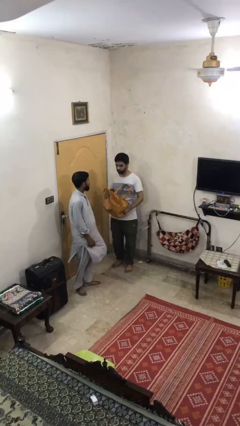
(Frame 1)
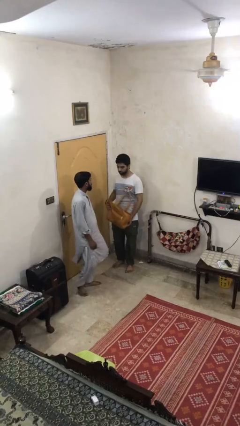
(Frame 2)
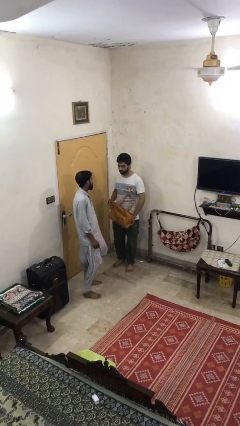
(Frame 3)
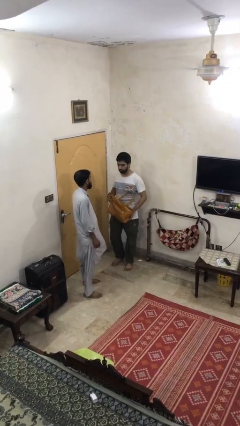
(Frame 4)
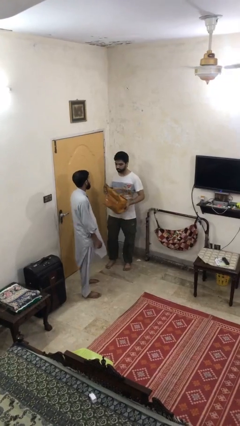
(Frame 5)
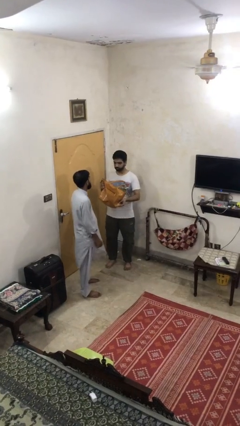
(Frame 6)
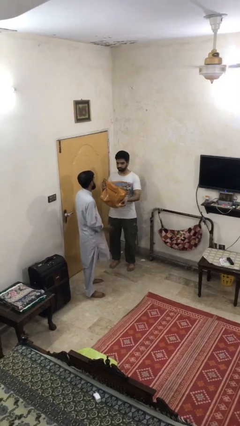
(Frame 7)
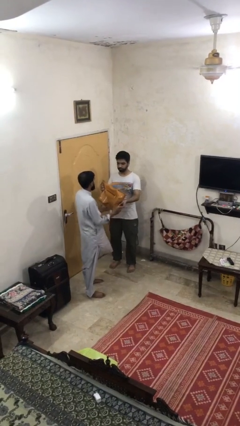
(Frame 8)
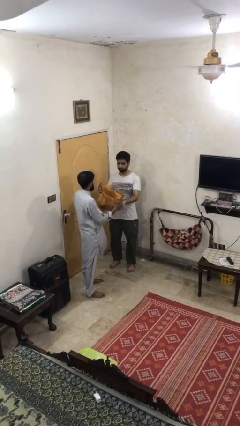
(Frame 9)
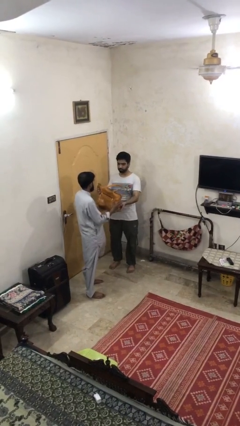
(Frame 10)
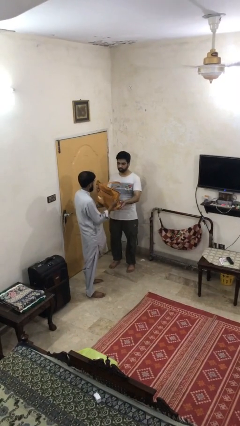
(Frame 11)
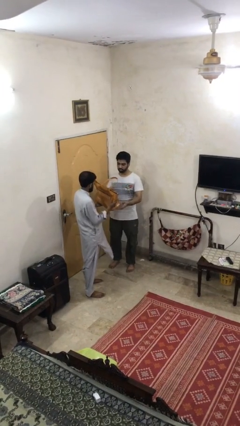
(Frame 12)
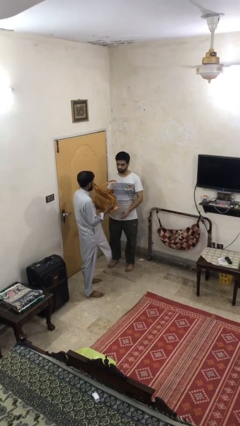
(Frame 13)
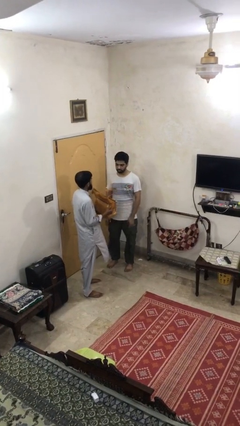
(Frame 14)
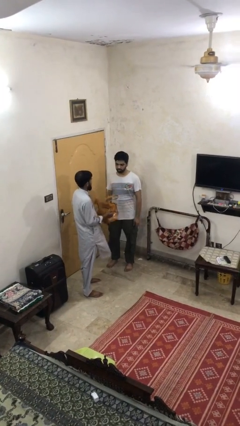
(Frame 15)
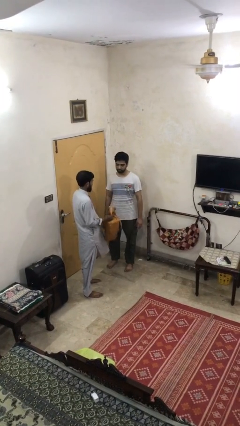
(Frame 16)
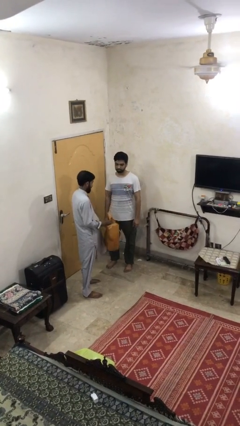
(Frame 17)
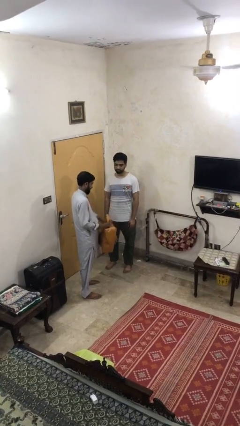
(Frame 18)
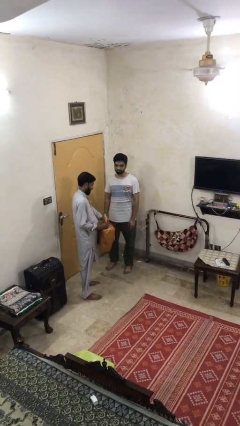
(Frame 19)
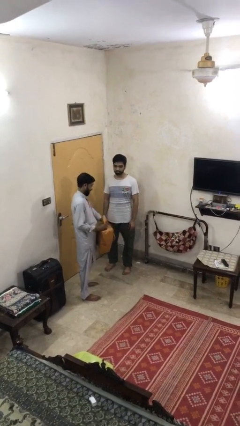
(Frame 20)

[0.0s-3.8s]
person transfers object to person

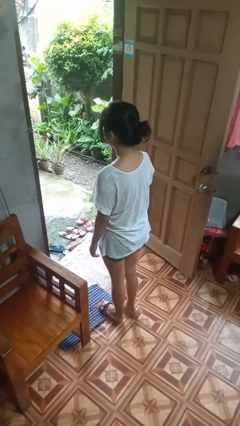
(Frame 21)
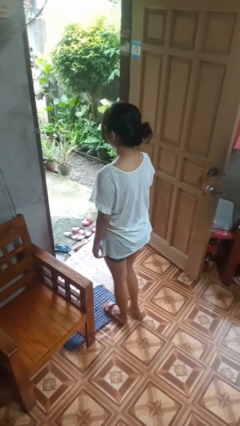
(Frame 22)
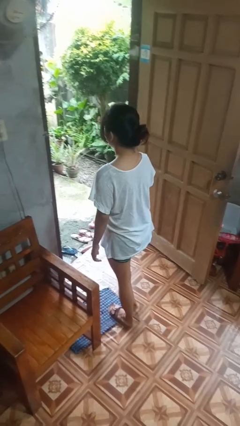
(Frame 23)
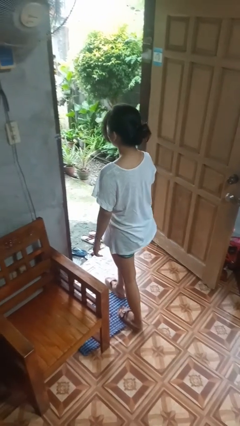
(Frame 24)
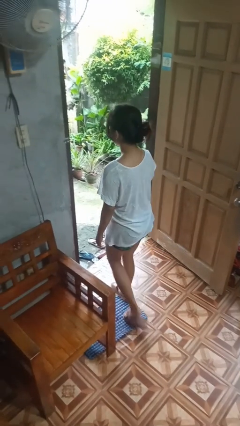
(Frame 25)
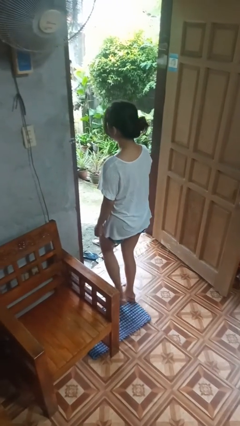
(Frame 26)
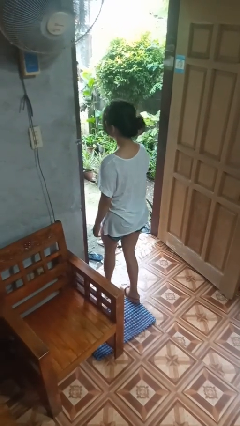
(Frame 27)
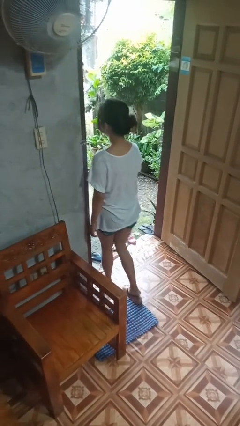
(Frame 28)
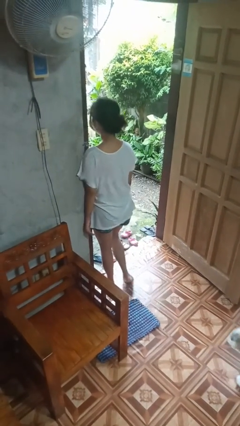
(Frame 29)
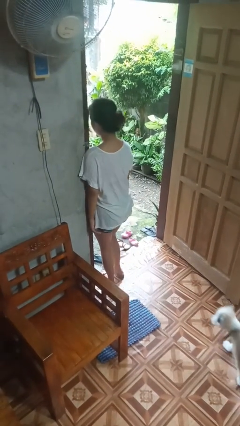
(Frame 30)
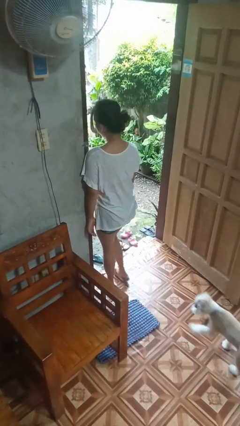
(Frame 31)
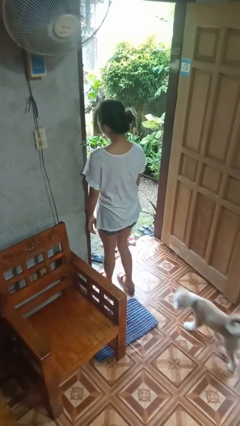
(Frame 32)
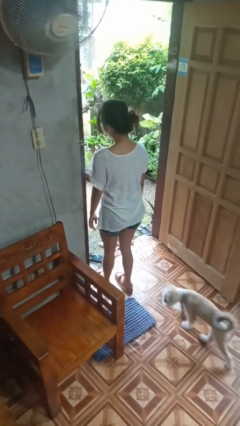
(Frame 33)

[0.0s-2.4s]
person bumps into wall

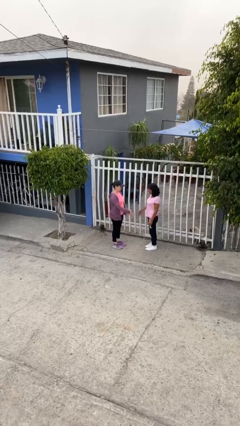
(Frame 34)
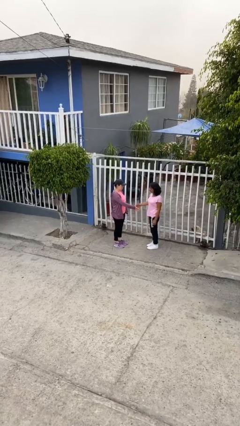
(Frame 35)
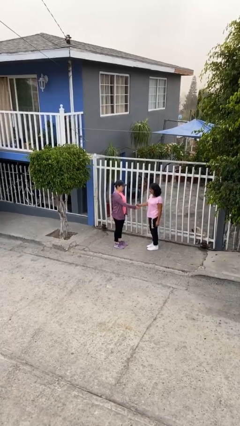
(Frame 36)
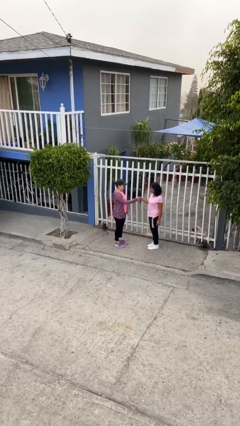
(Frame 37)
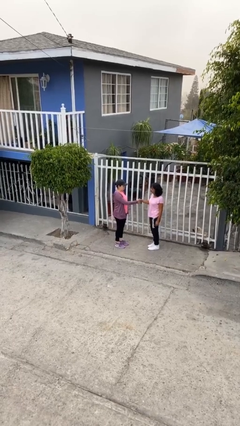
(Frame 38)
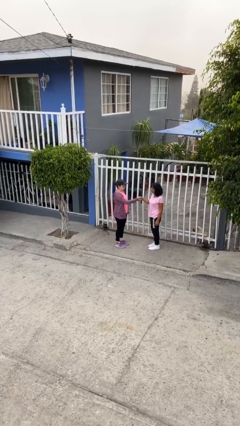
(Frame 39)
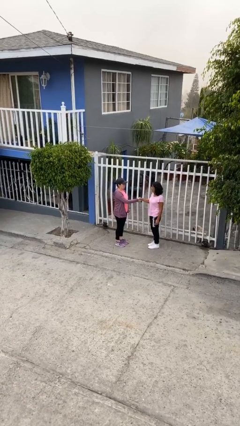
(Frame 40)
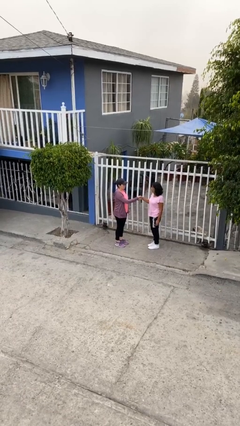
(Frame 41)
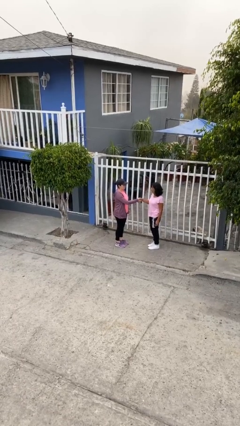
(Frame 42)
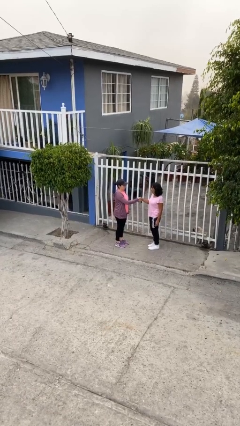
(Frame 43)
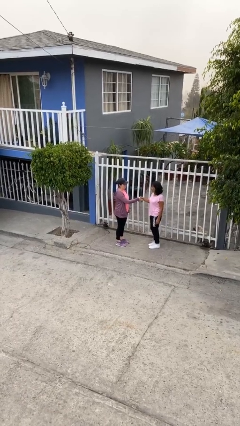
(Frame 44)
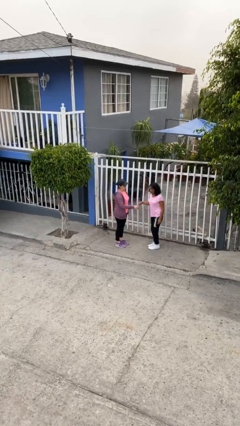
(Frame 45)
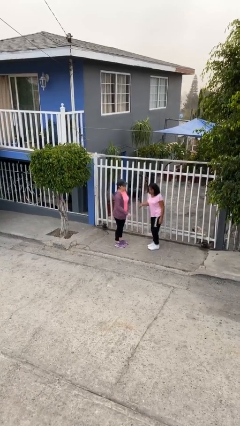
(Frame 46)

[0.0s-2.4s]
person shakes hand

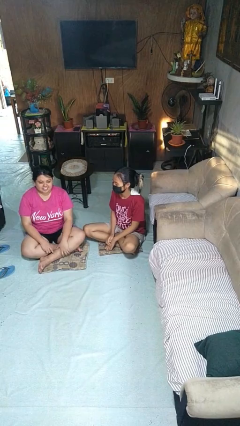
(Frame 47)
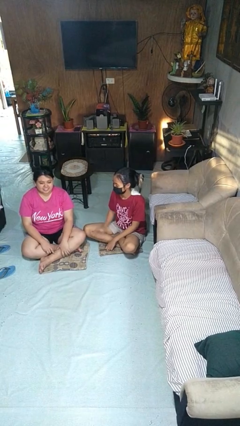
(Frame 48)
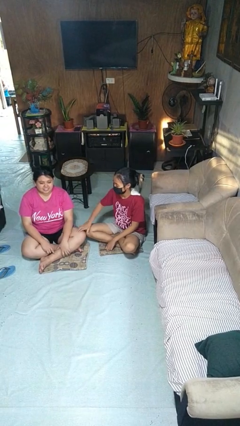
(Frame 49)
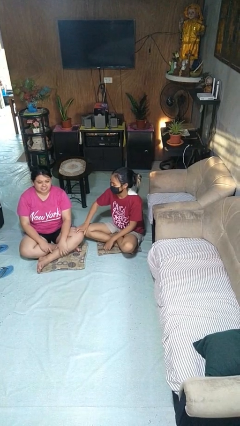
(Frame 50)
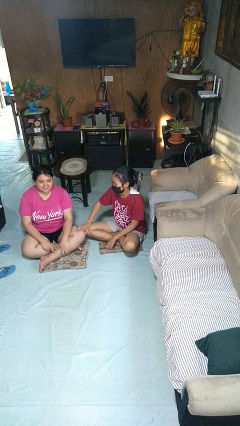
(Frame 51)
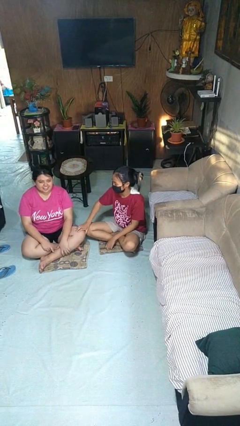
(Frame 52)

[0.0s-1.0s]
person tickles person

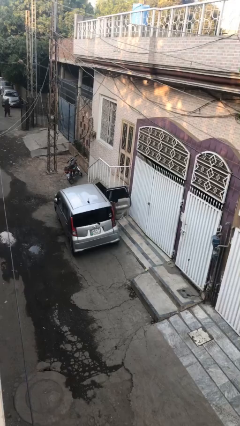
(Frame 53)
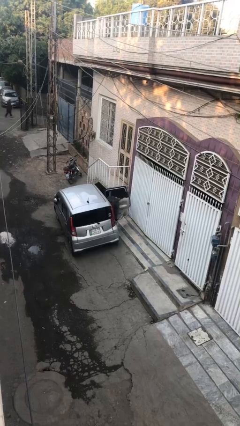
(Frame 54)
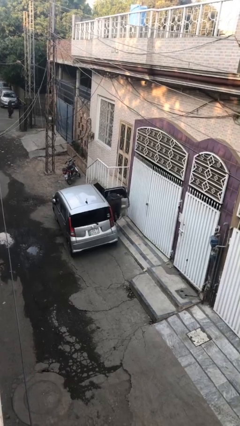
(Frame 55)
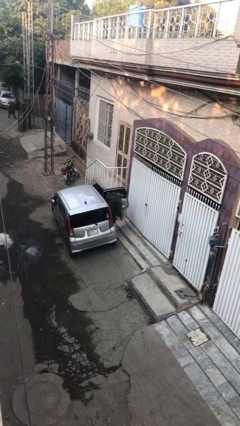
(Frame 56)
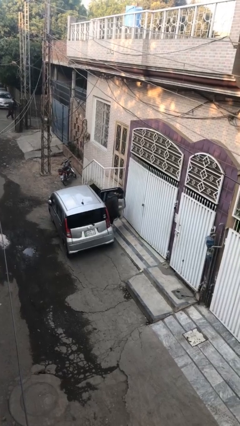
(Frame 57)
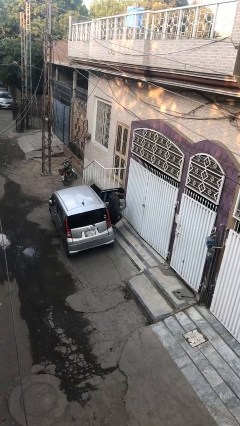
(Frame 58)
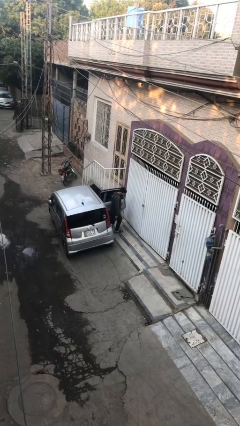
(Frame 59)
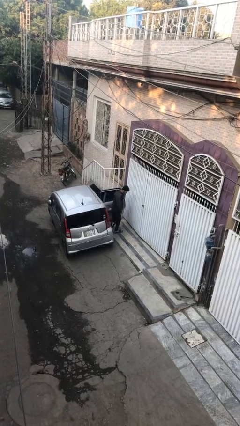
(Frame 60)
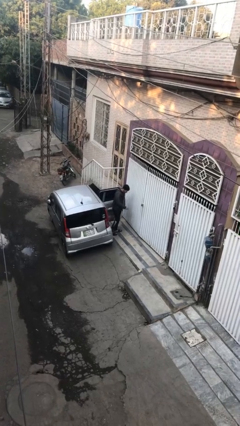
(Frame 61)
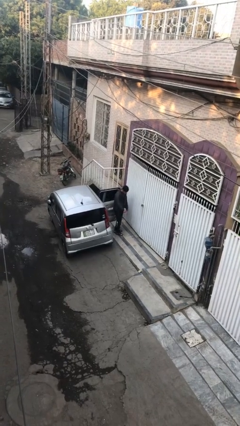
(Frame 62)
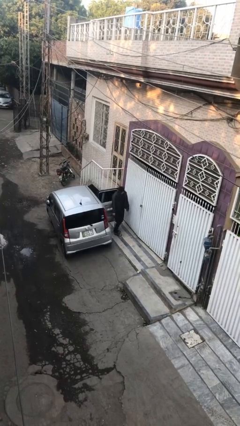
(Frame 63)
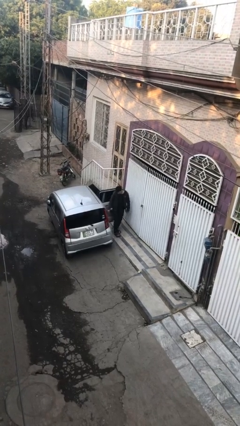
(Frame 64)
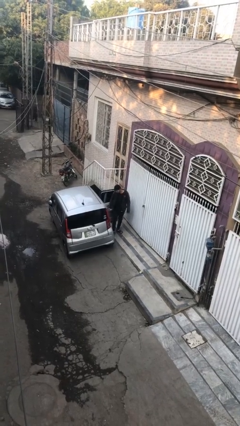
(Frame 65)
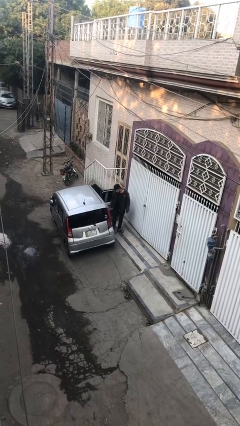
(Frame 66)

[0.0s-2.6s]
person exits car

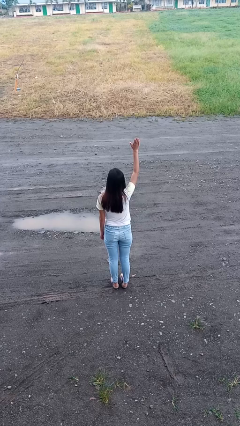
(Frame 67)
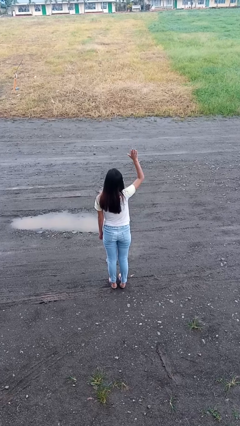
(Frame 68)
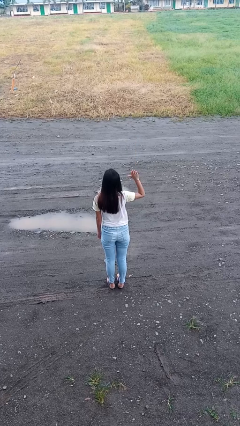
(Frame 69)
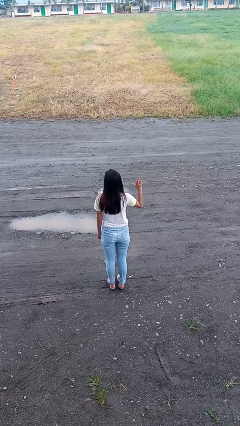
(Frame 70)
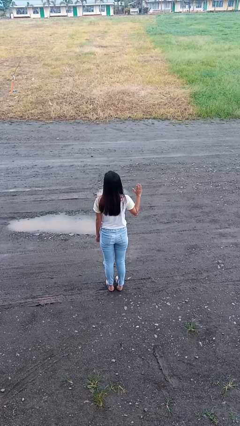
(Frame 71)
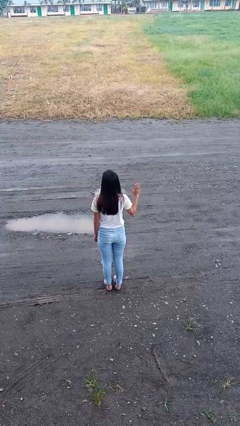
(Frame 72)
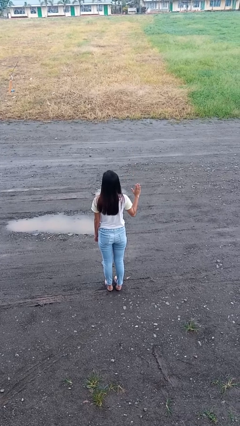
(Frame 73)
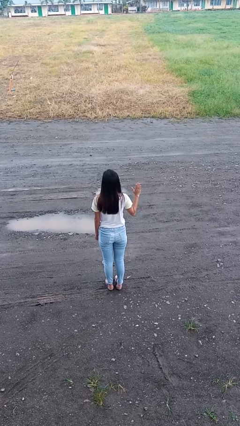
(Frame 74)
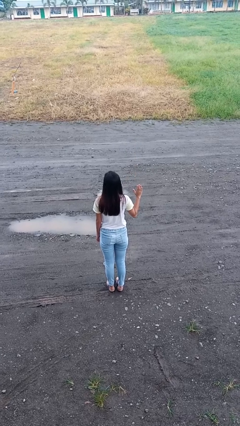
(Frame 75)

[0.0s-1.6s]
person gestures lower hand

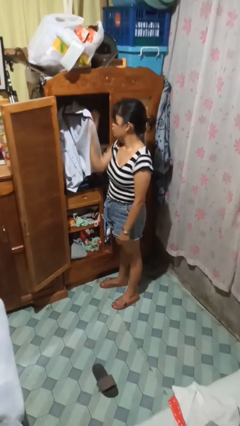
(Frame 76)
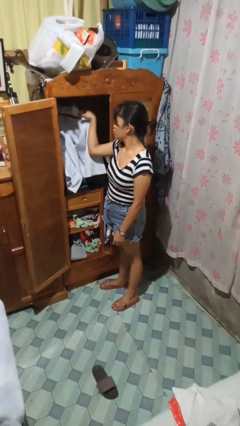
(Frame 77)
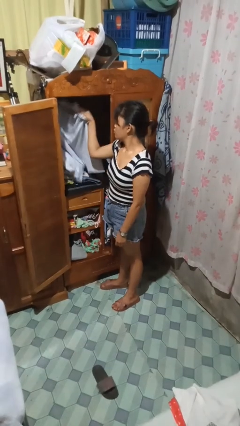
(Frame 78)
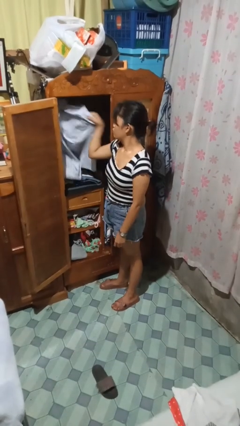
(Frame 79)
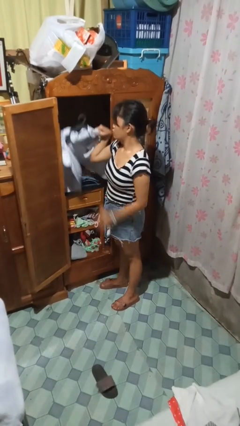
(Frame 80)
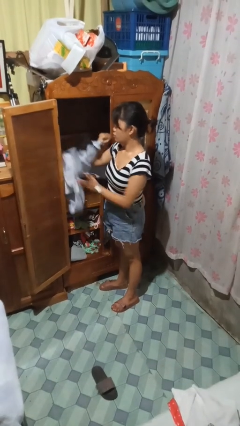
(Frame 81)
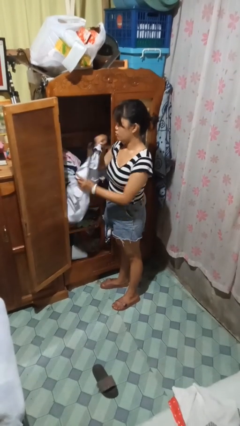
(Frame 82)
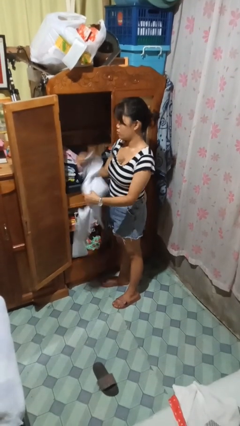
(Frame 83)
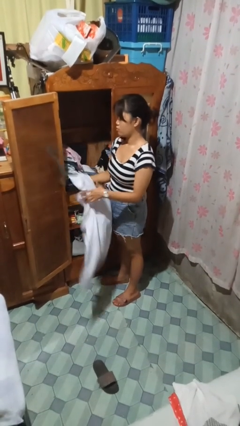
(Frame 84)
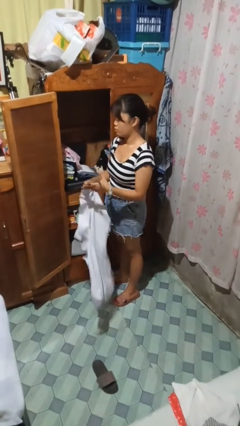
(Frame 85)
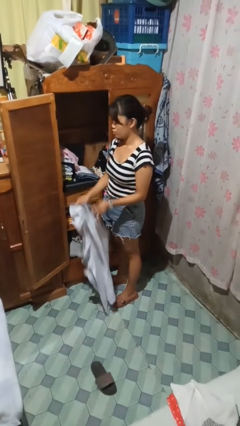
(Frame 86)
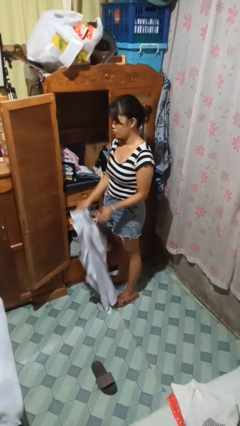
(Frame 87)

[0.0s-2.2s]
person takes clothes from closet

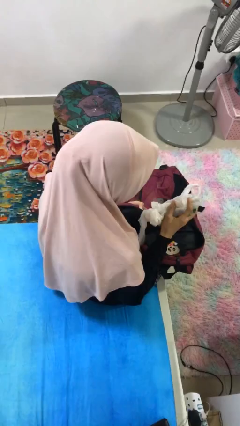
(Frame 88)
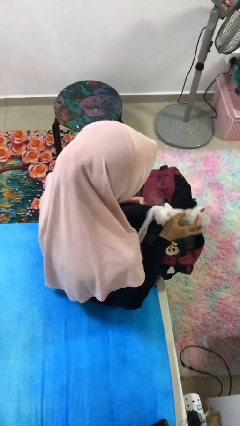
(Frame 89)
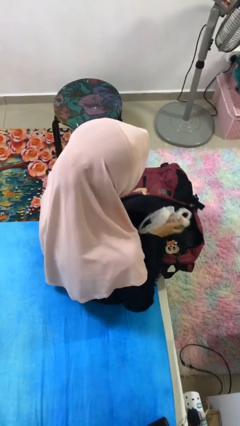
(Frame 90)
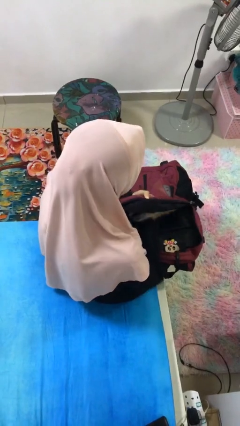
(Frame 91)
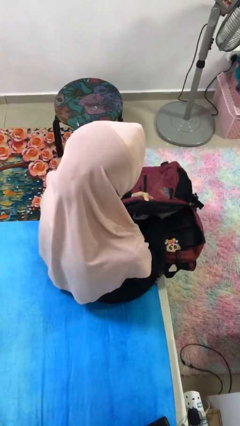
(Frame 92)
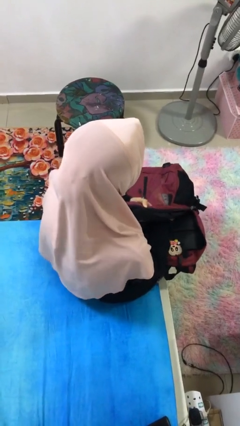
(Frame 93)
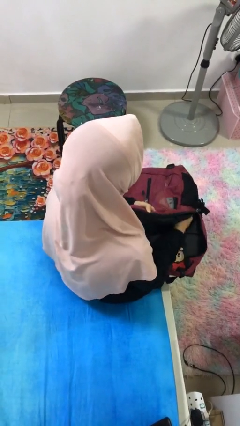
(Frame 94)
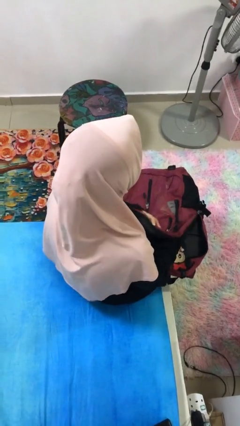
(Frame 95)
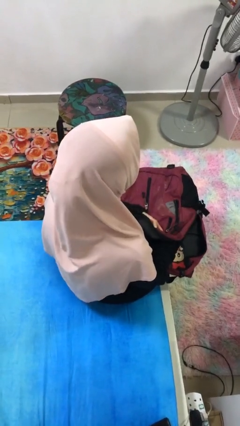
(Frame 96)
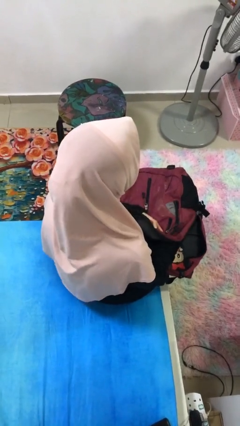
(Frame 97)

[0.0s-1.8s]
person puts object into backpack
